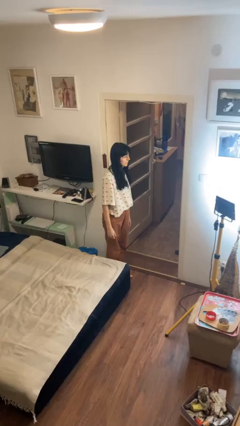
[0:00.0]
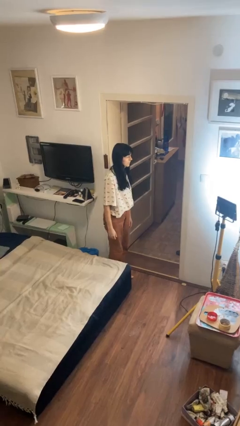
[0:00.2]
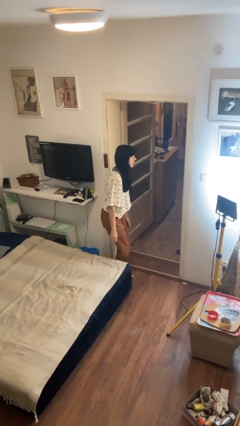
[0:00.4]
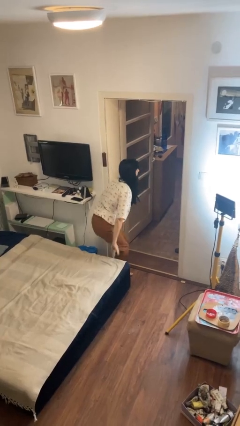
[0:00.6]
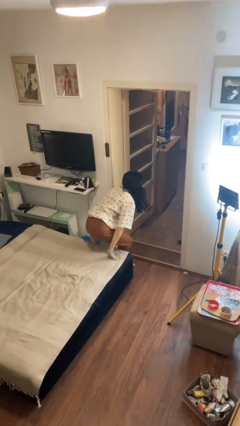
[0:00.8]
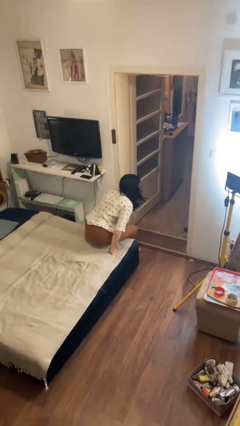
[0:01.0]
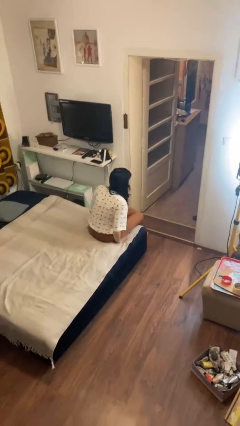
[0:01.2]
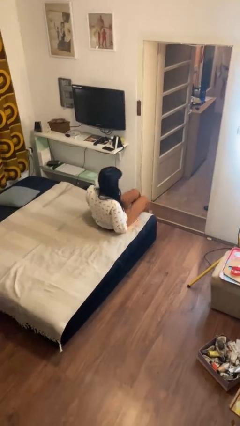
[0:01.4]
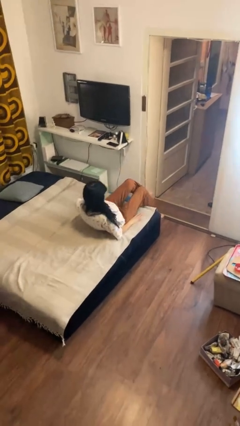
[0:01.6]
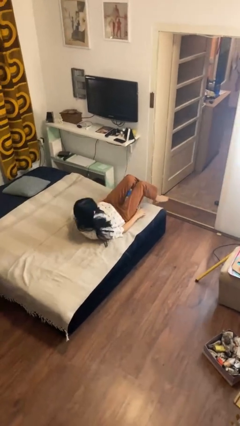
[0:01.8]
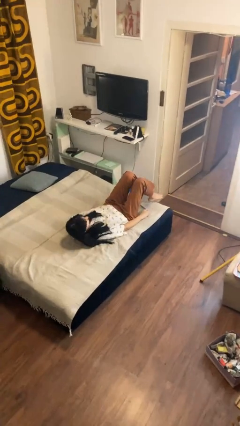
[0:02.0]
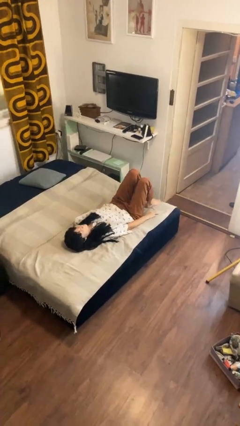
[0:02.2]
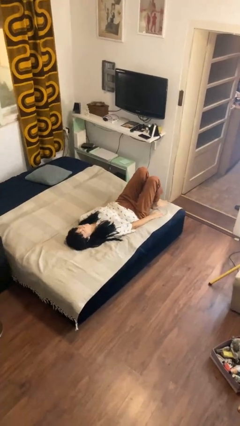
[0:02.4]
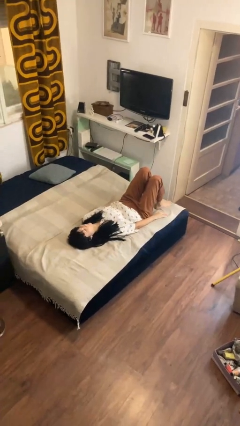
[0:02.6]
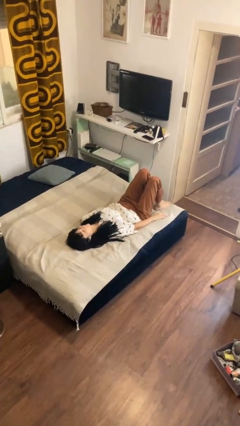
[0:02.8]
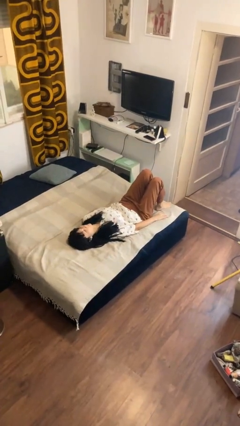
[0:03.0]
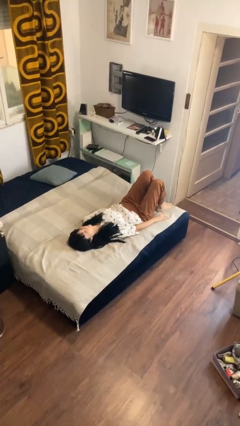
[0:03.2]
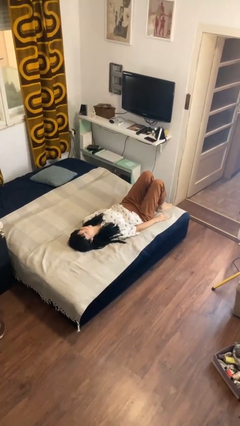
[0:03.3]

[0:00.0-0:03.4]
person lies down on bed

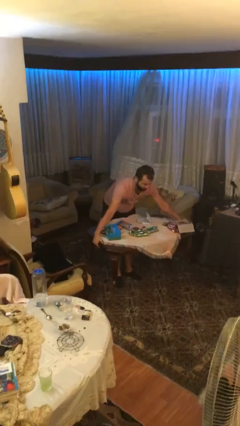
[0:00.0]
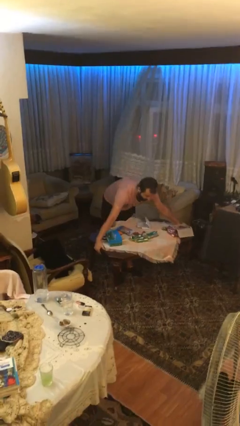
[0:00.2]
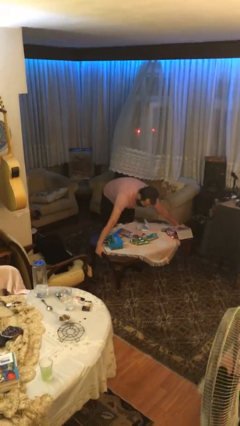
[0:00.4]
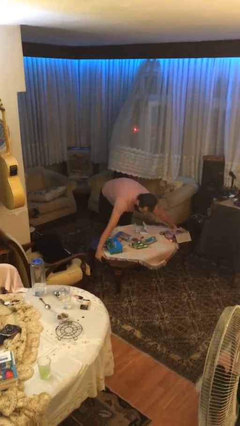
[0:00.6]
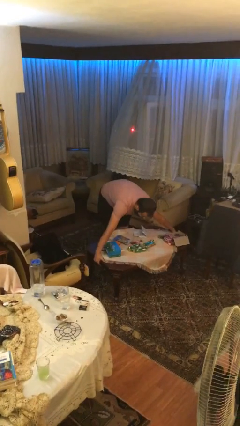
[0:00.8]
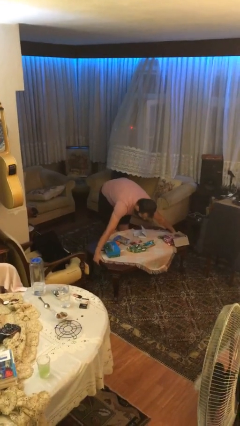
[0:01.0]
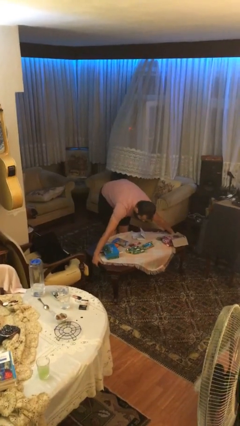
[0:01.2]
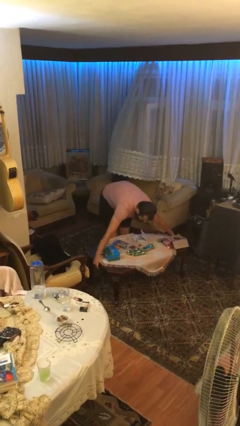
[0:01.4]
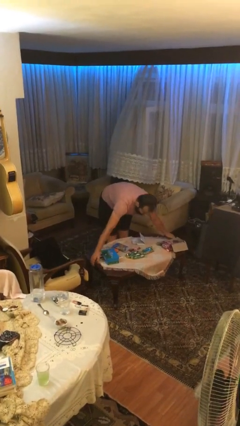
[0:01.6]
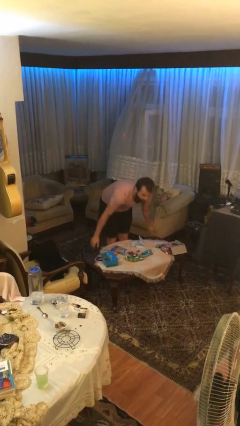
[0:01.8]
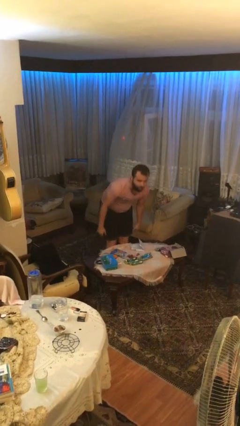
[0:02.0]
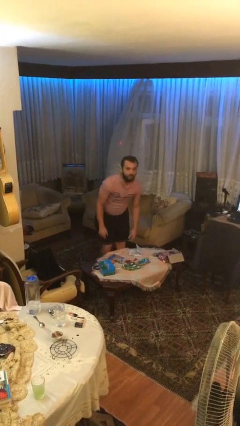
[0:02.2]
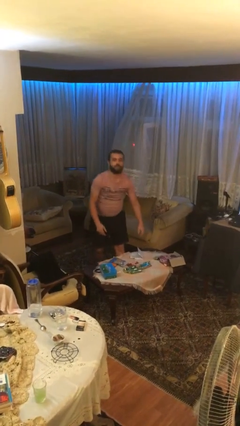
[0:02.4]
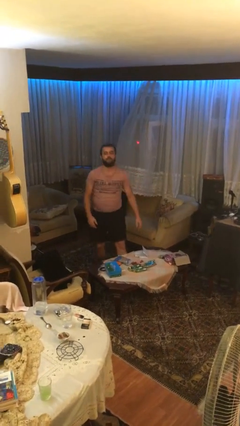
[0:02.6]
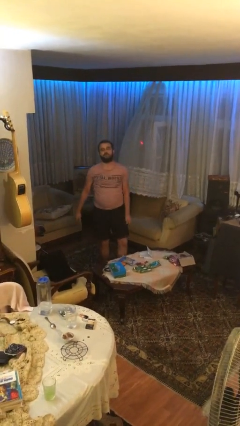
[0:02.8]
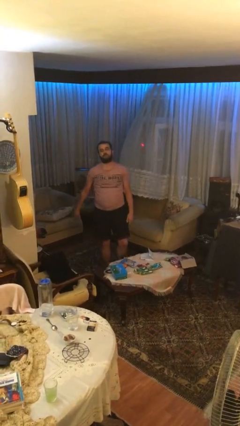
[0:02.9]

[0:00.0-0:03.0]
person puts down object on floor

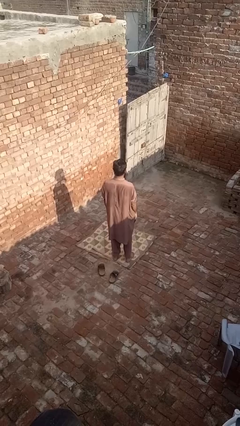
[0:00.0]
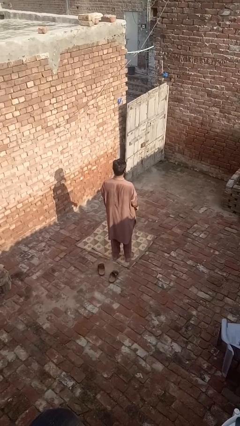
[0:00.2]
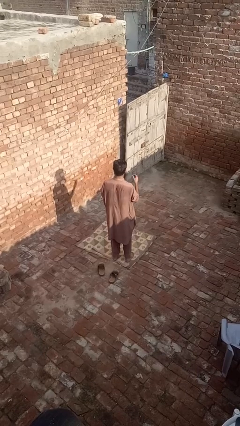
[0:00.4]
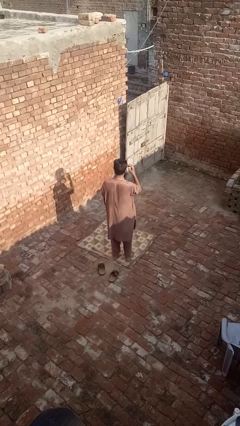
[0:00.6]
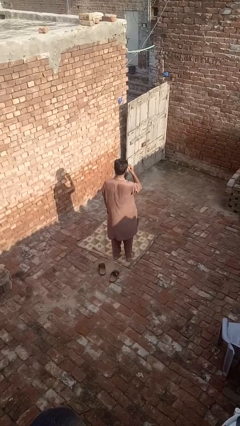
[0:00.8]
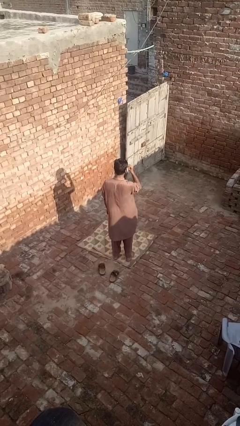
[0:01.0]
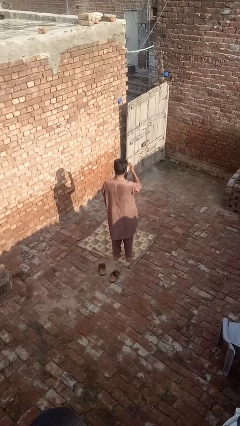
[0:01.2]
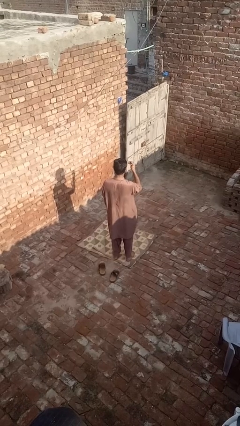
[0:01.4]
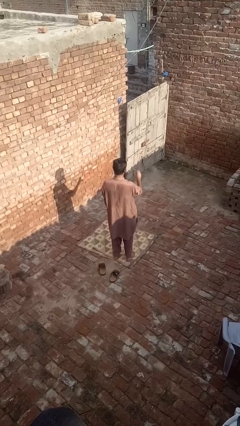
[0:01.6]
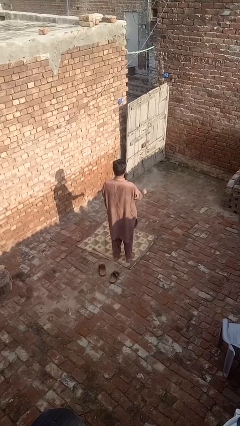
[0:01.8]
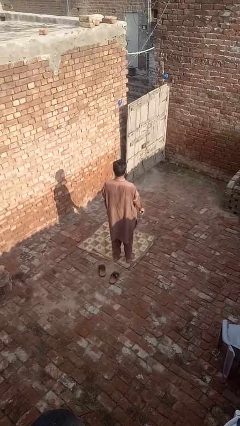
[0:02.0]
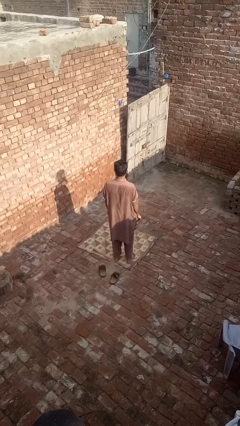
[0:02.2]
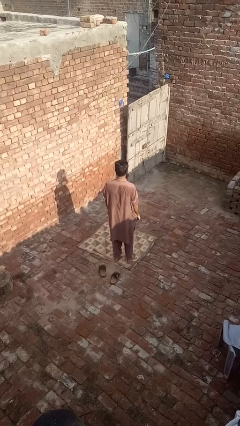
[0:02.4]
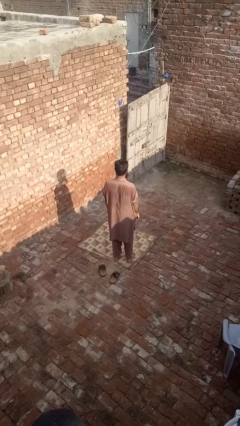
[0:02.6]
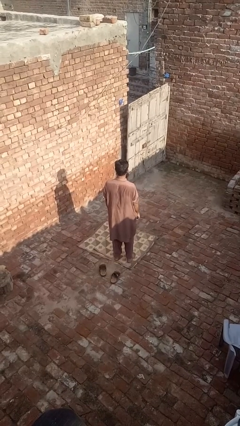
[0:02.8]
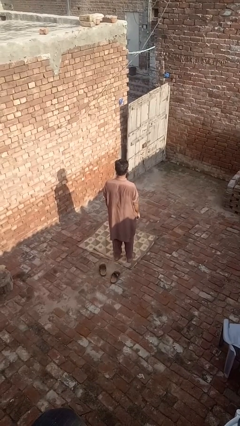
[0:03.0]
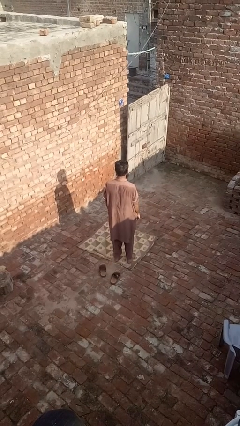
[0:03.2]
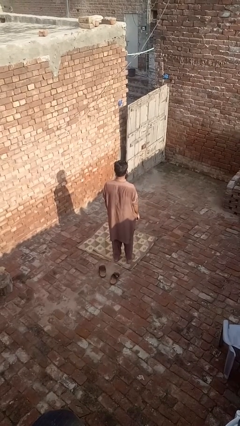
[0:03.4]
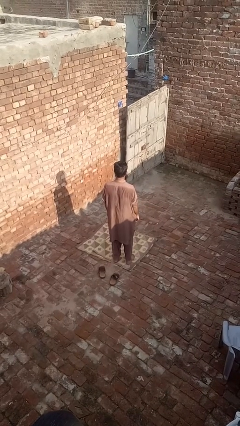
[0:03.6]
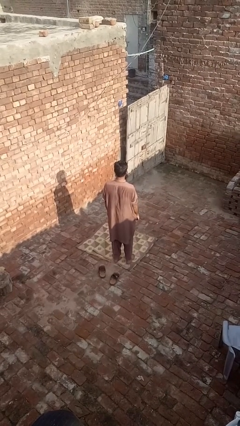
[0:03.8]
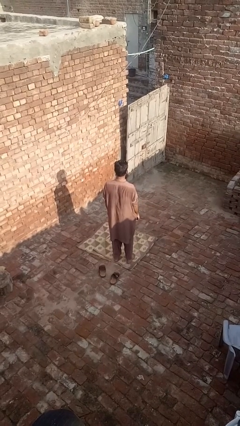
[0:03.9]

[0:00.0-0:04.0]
person takes off glasses

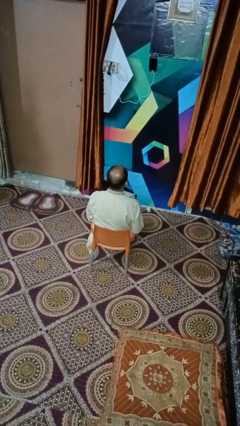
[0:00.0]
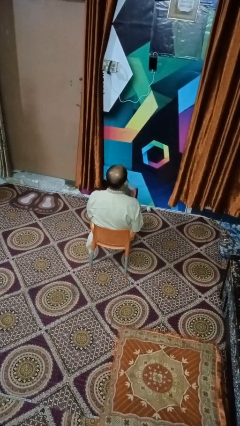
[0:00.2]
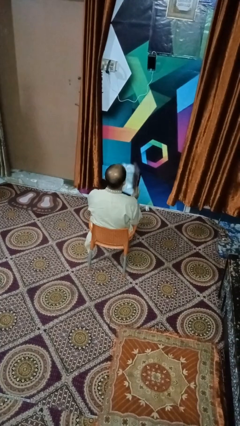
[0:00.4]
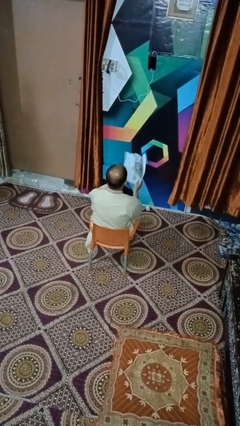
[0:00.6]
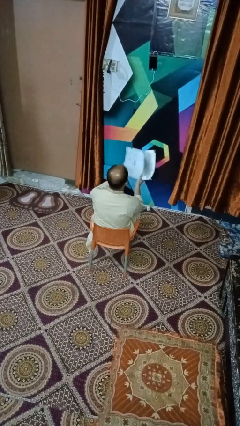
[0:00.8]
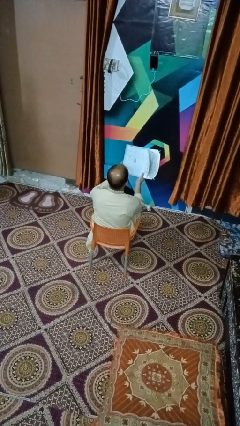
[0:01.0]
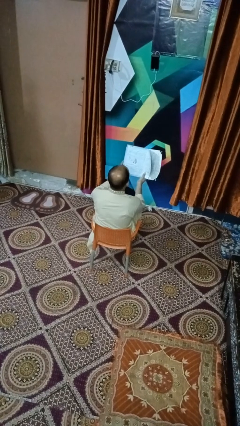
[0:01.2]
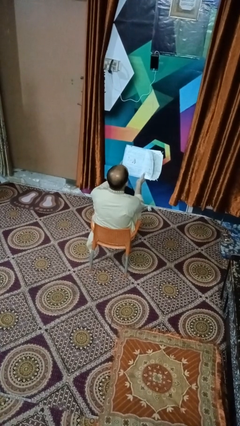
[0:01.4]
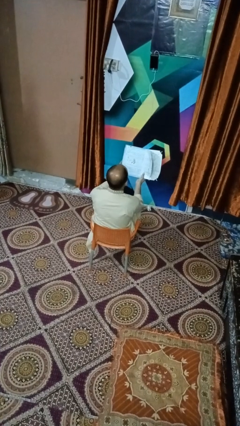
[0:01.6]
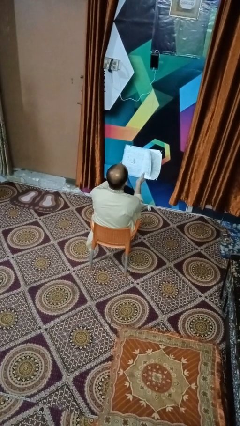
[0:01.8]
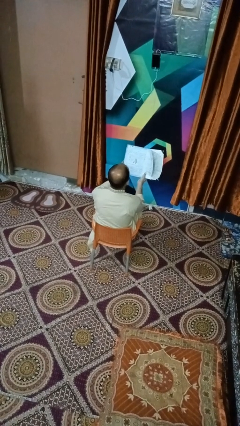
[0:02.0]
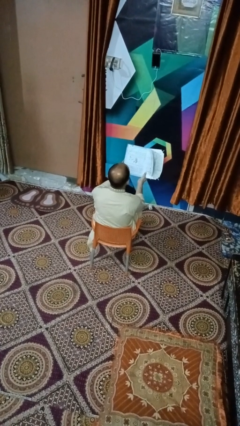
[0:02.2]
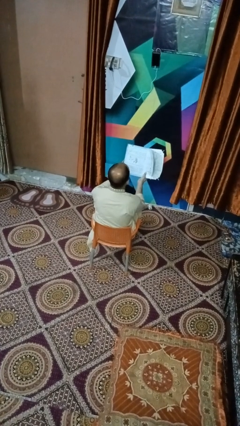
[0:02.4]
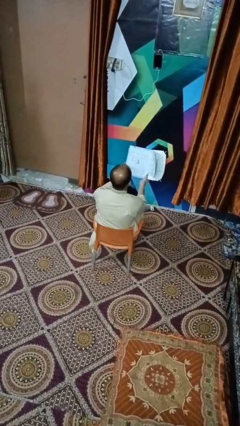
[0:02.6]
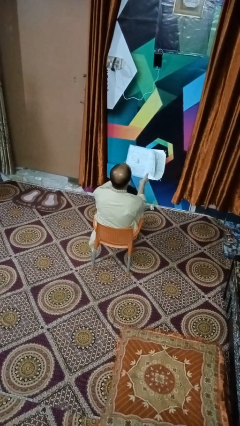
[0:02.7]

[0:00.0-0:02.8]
person reads book

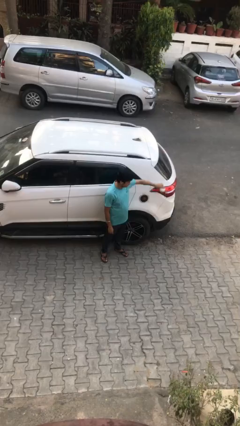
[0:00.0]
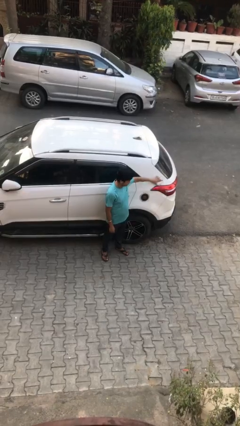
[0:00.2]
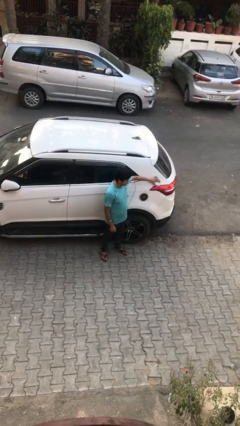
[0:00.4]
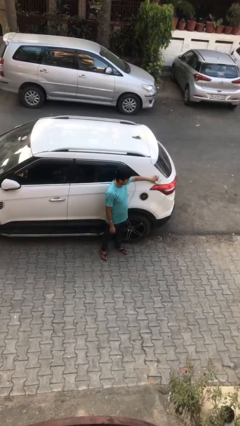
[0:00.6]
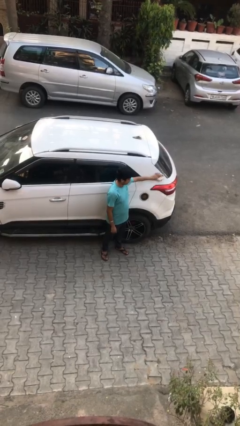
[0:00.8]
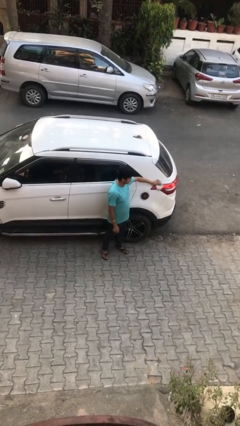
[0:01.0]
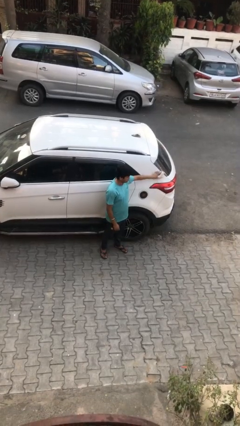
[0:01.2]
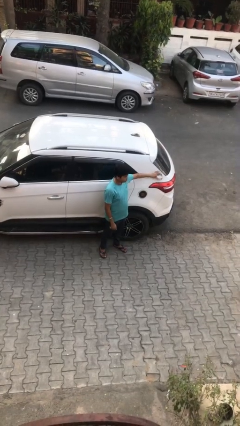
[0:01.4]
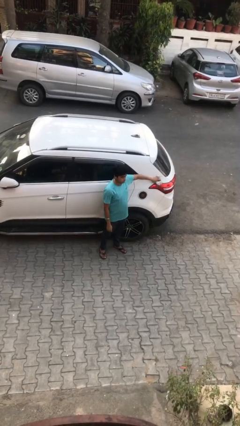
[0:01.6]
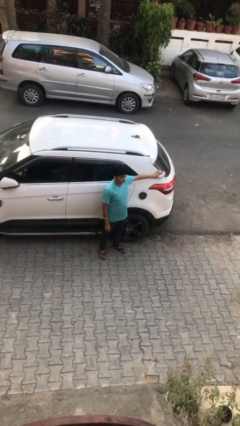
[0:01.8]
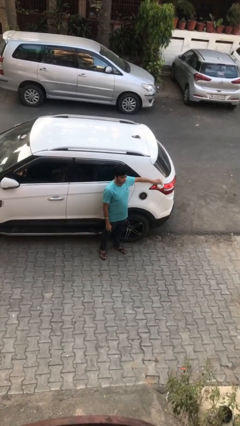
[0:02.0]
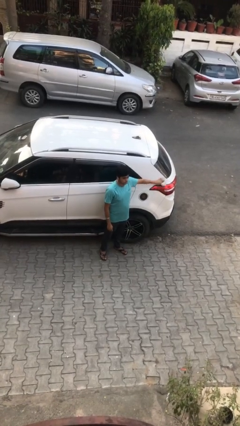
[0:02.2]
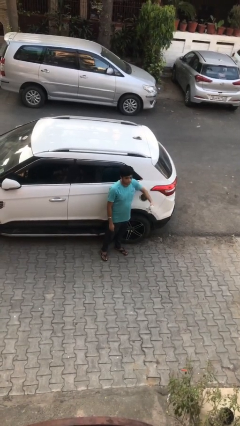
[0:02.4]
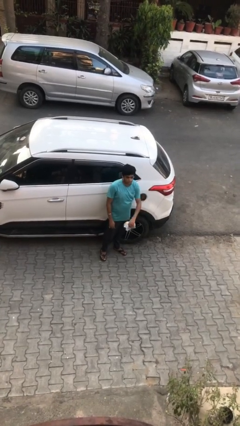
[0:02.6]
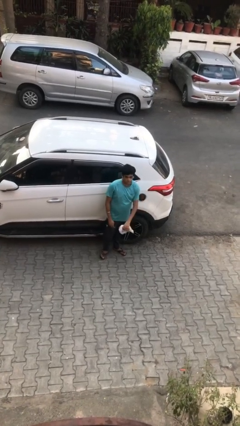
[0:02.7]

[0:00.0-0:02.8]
person polishes car with rag

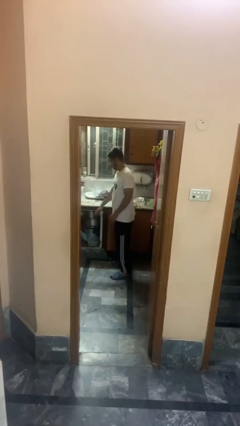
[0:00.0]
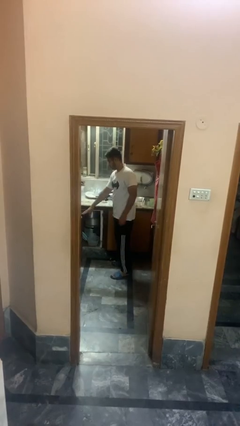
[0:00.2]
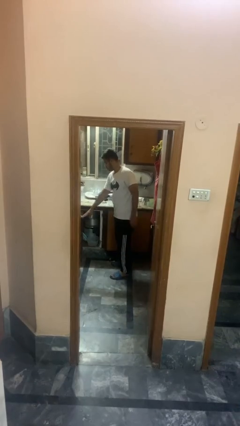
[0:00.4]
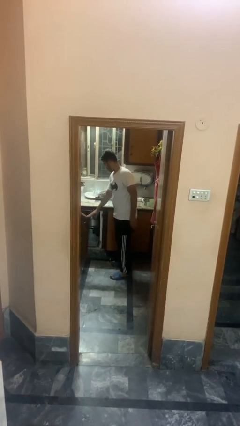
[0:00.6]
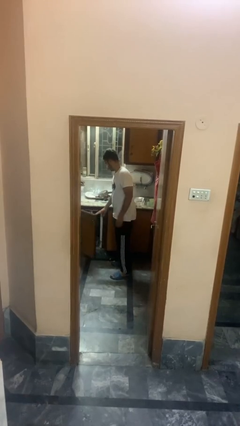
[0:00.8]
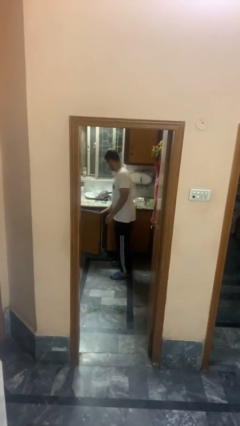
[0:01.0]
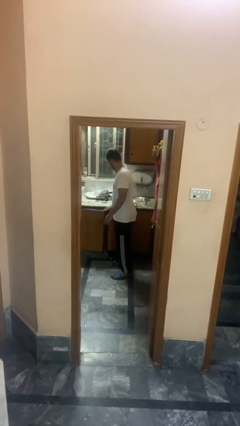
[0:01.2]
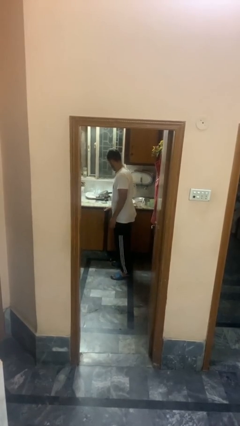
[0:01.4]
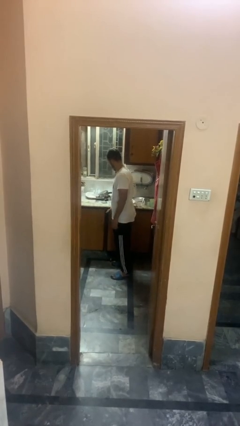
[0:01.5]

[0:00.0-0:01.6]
person closes cabinet
